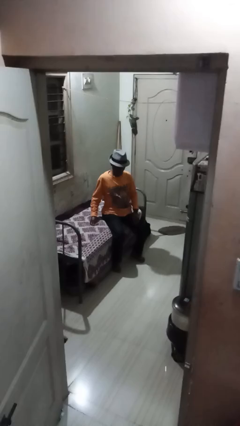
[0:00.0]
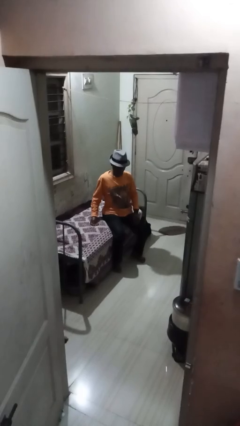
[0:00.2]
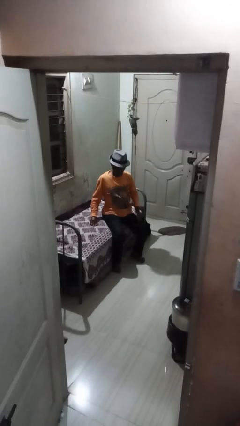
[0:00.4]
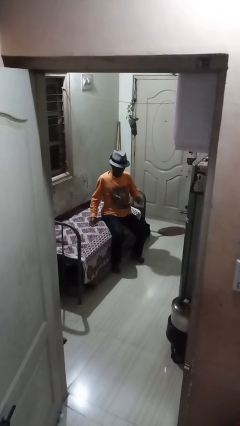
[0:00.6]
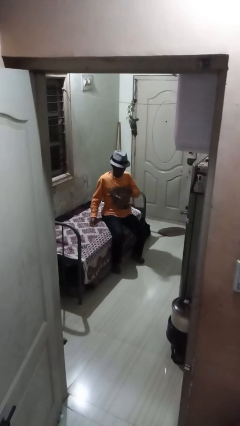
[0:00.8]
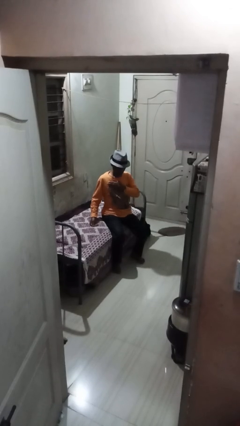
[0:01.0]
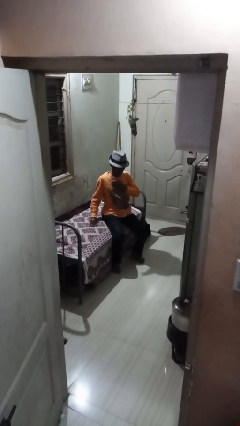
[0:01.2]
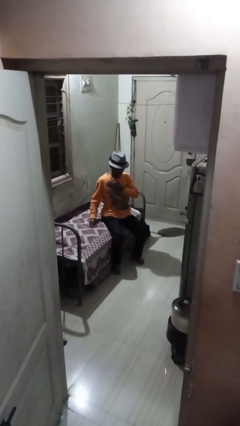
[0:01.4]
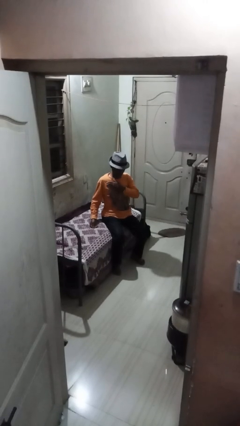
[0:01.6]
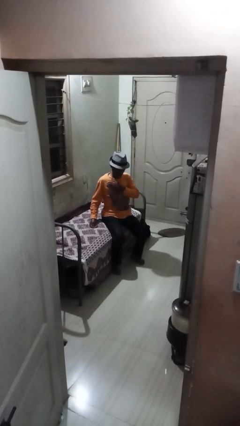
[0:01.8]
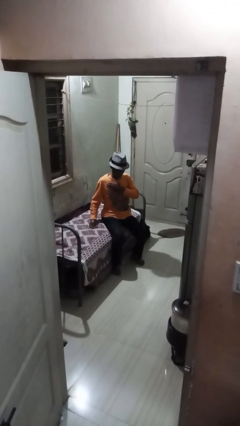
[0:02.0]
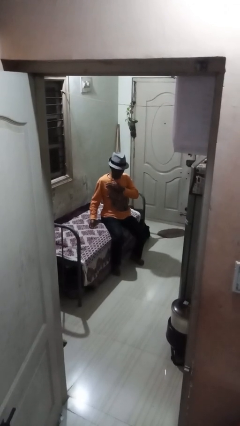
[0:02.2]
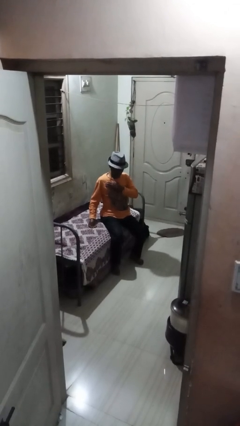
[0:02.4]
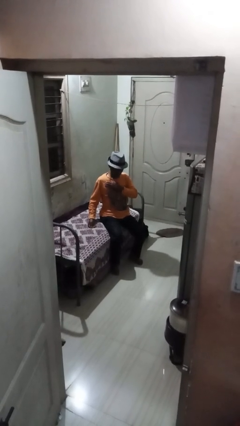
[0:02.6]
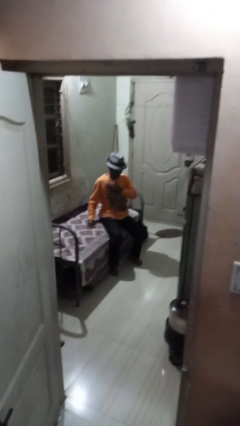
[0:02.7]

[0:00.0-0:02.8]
person drums on chest

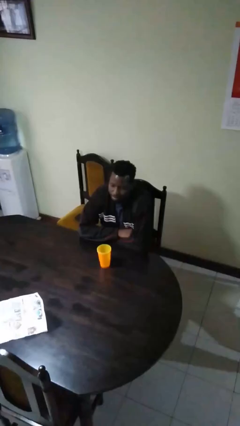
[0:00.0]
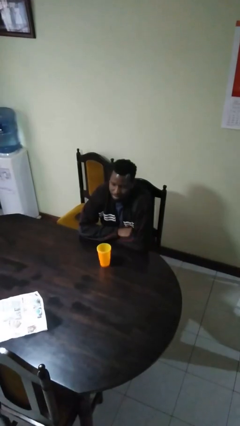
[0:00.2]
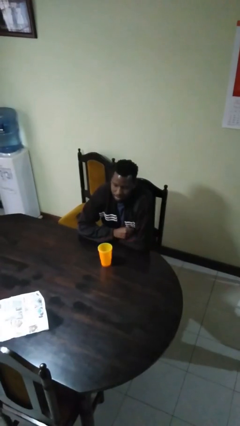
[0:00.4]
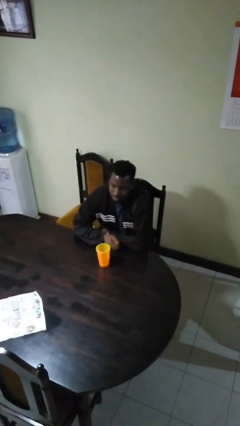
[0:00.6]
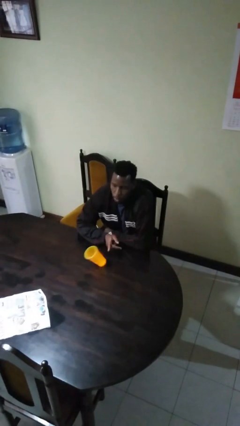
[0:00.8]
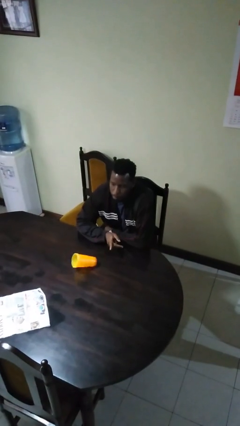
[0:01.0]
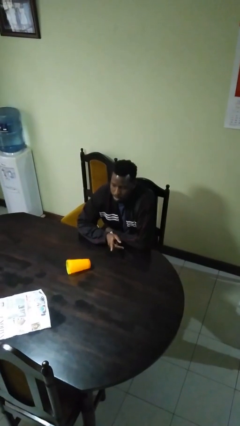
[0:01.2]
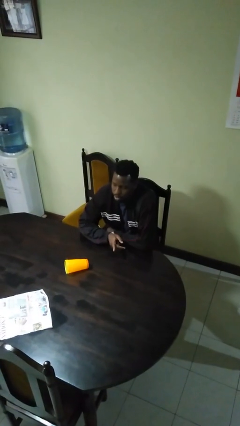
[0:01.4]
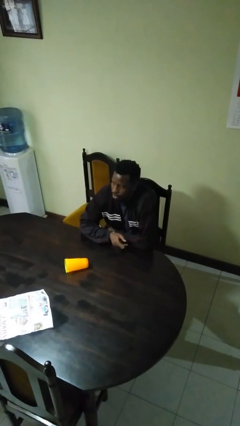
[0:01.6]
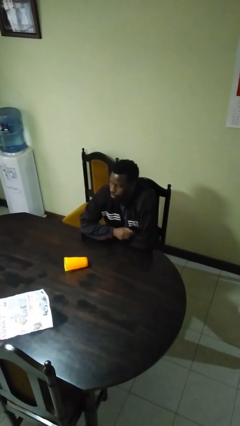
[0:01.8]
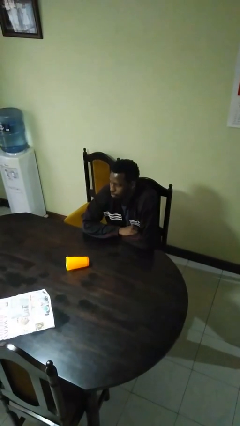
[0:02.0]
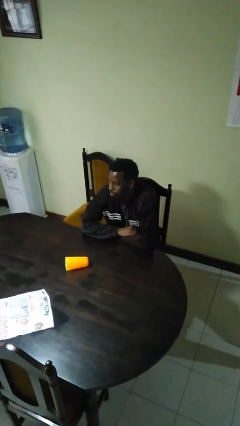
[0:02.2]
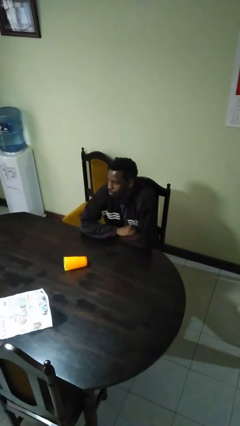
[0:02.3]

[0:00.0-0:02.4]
person knocks over glass

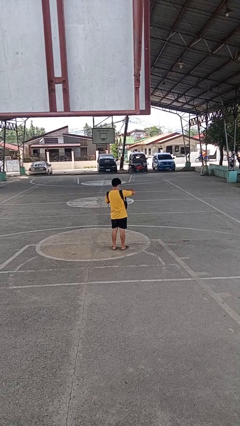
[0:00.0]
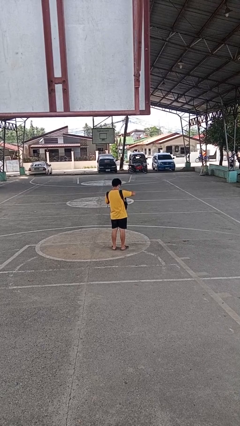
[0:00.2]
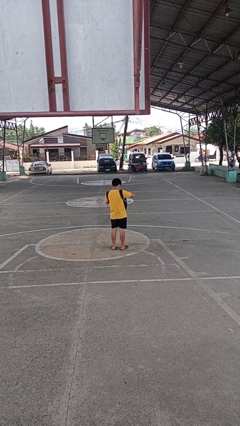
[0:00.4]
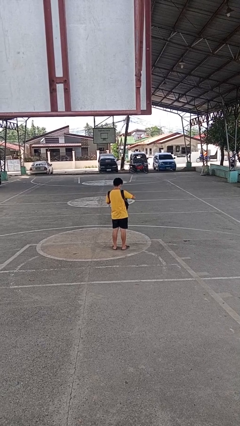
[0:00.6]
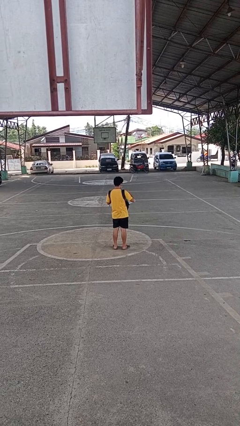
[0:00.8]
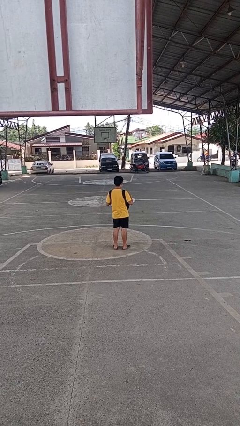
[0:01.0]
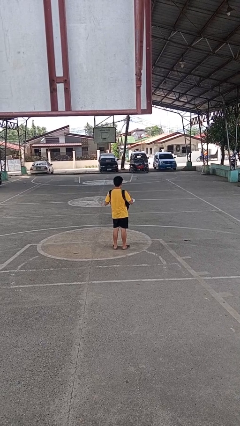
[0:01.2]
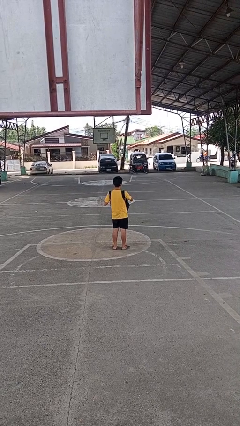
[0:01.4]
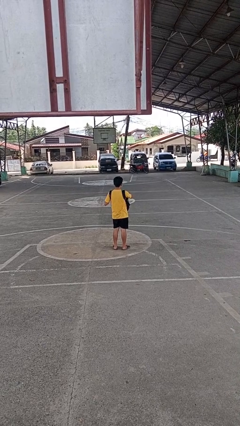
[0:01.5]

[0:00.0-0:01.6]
person puts object into backpack

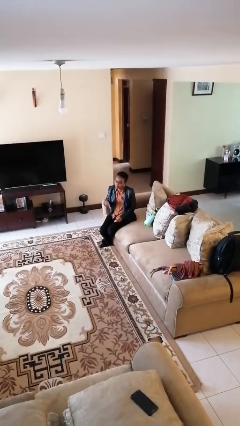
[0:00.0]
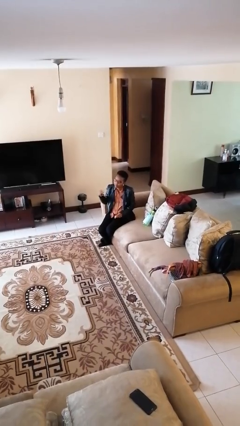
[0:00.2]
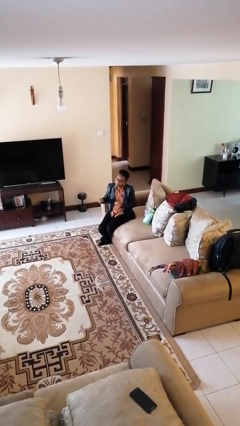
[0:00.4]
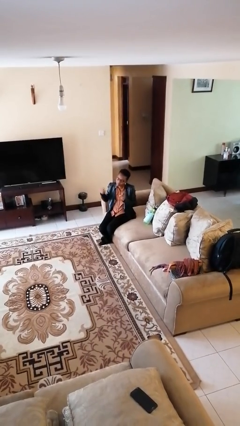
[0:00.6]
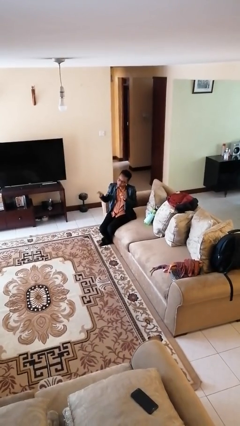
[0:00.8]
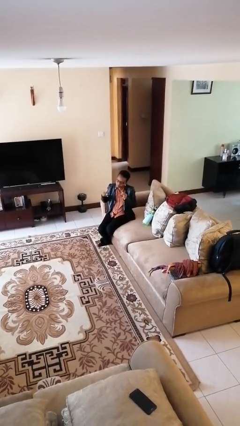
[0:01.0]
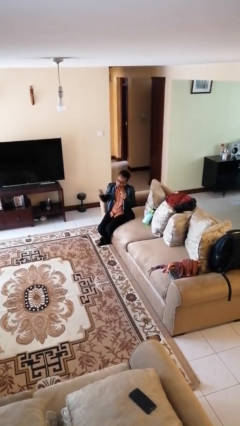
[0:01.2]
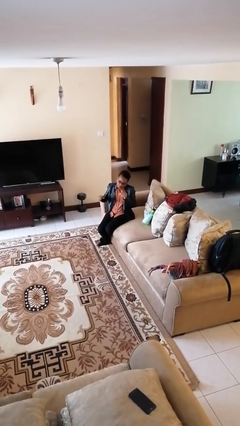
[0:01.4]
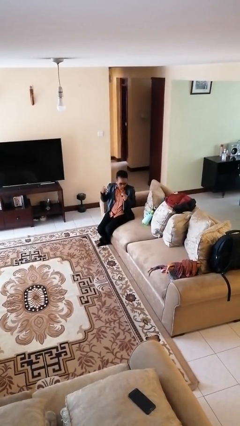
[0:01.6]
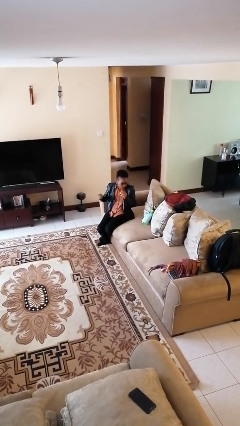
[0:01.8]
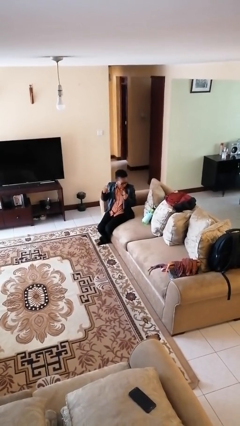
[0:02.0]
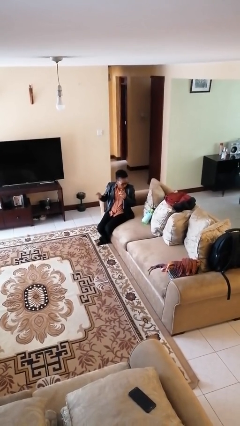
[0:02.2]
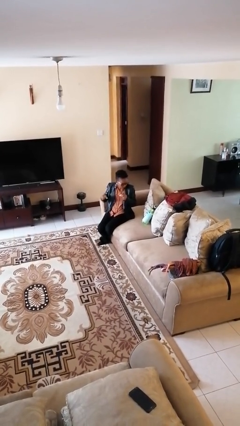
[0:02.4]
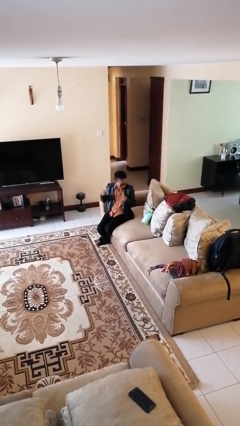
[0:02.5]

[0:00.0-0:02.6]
person snaps fingers

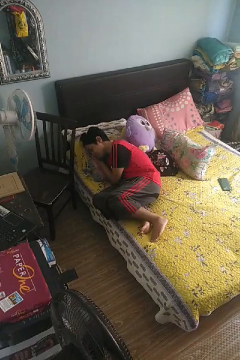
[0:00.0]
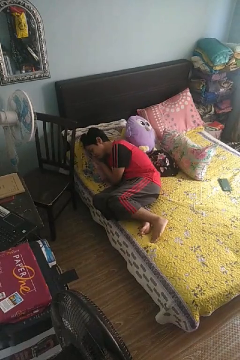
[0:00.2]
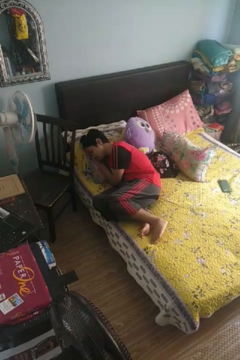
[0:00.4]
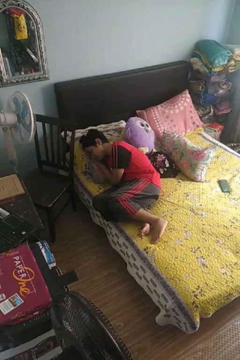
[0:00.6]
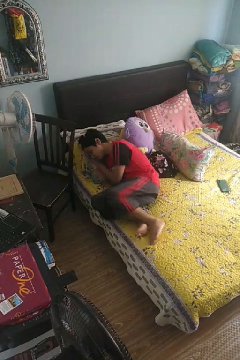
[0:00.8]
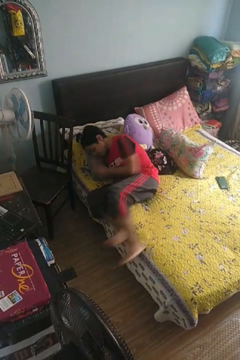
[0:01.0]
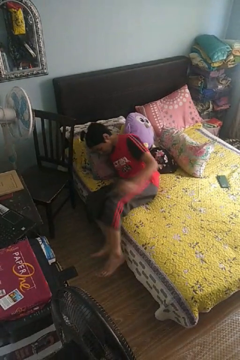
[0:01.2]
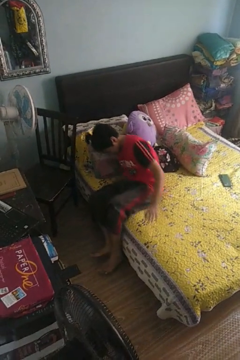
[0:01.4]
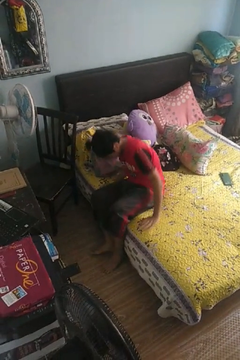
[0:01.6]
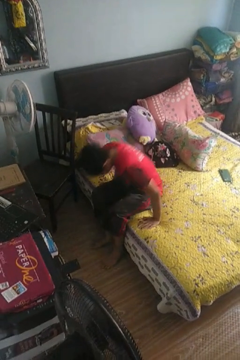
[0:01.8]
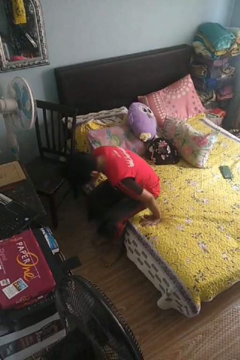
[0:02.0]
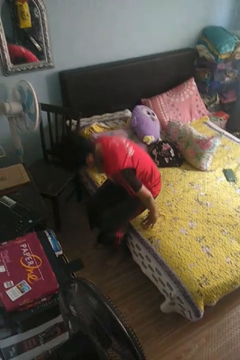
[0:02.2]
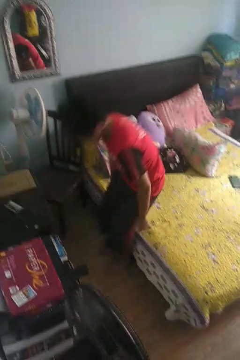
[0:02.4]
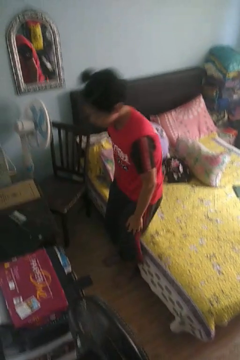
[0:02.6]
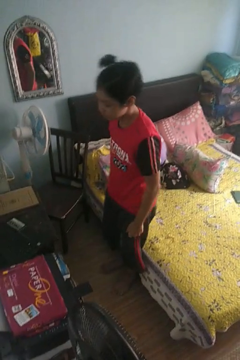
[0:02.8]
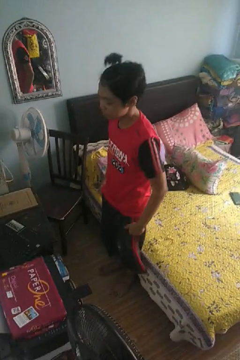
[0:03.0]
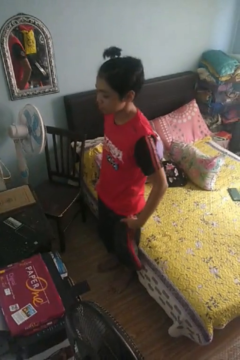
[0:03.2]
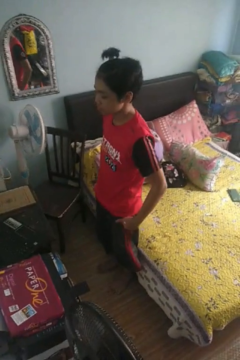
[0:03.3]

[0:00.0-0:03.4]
person stands up

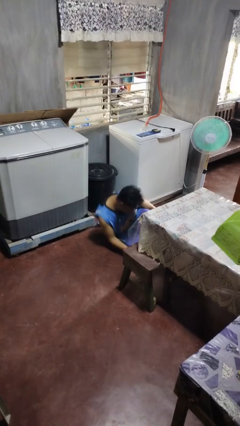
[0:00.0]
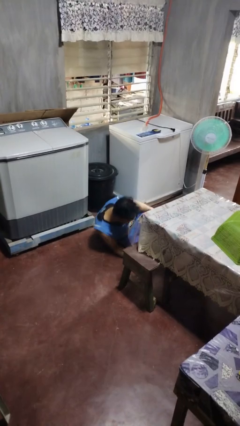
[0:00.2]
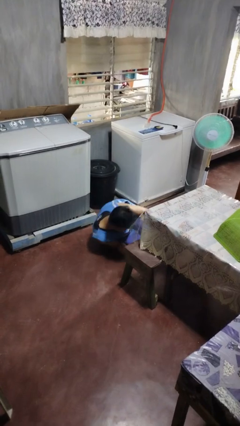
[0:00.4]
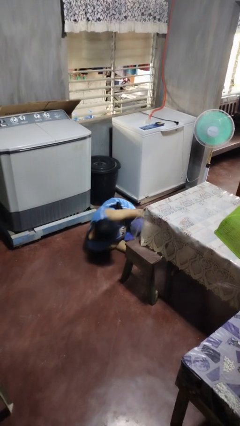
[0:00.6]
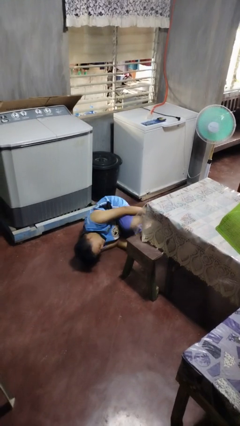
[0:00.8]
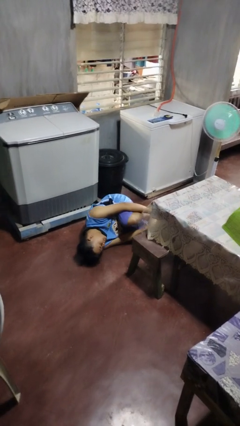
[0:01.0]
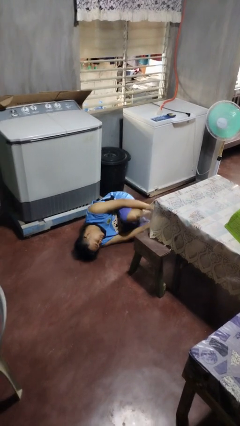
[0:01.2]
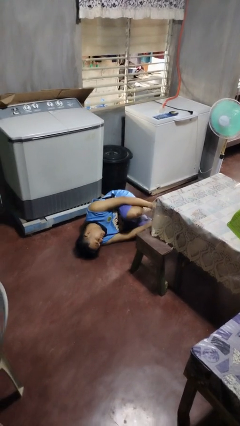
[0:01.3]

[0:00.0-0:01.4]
person lies down on floor

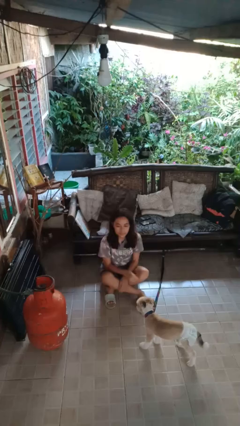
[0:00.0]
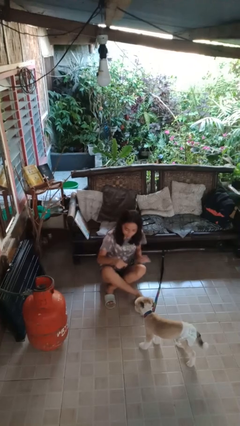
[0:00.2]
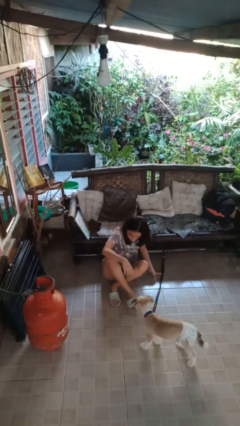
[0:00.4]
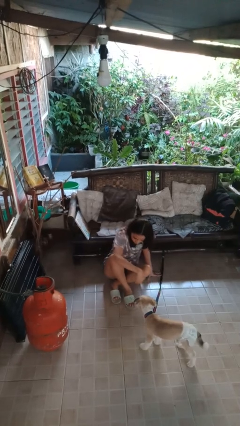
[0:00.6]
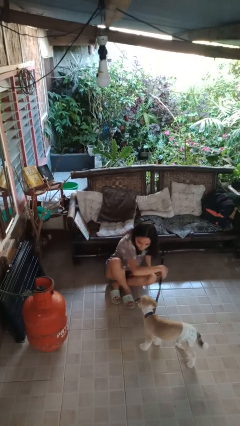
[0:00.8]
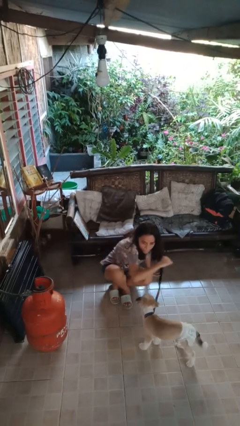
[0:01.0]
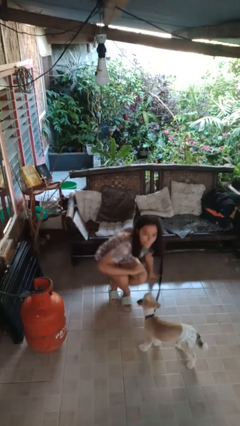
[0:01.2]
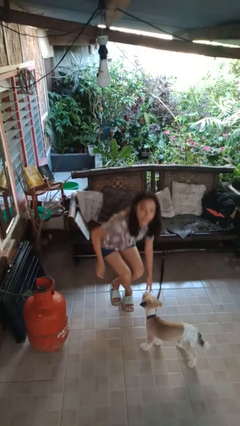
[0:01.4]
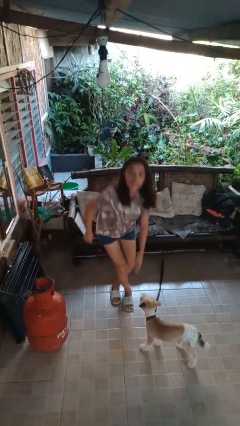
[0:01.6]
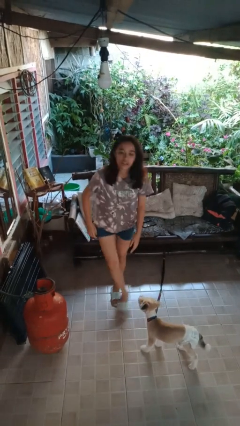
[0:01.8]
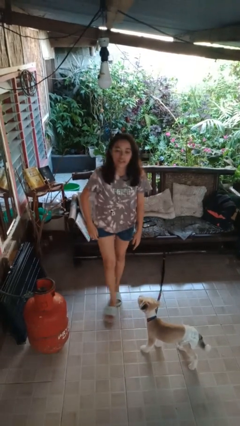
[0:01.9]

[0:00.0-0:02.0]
person stands up from floor

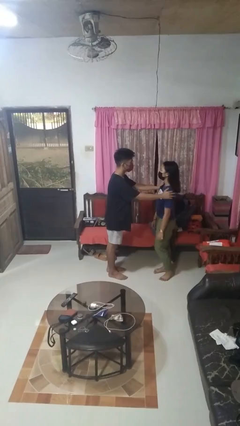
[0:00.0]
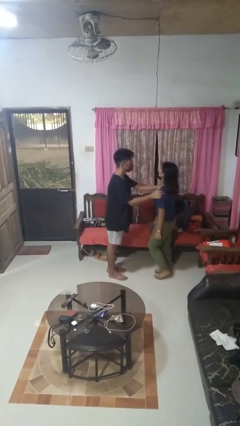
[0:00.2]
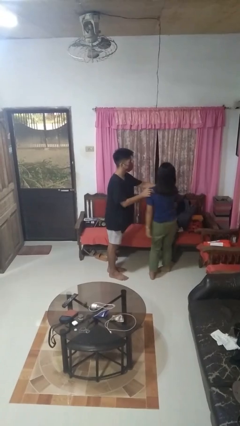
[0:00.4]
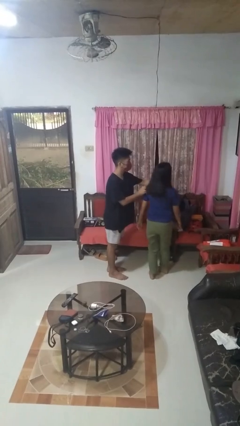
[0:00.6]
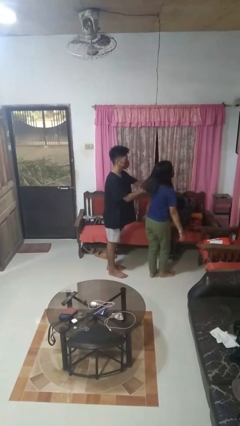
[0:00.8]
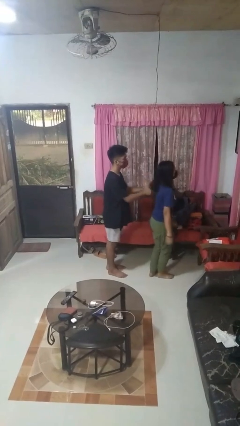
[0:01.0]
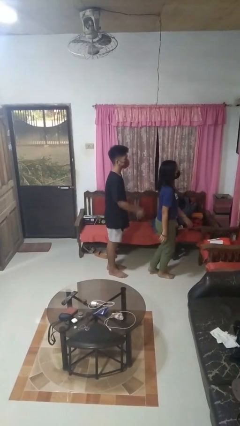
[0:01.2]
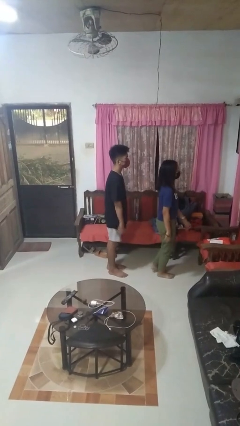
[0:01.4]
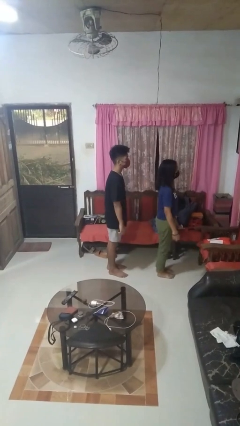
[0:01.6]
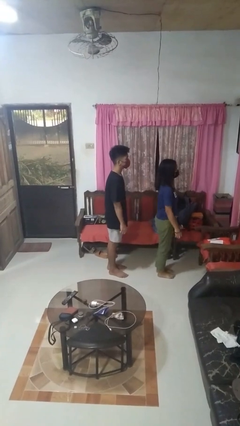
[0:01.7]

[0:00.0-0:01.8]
person spins person around
